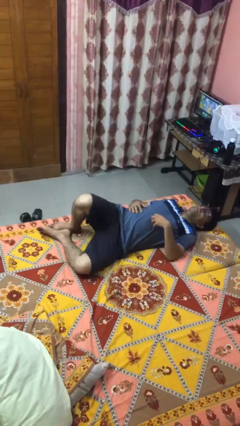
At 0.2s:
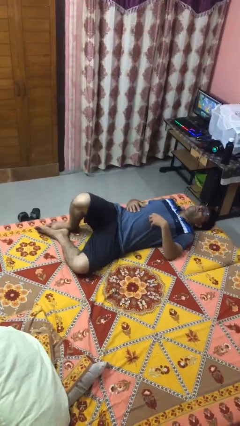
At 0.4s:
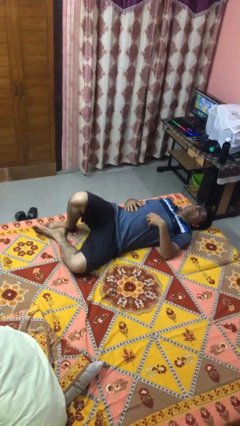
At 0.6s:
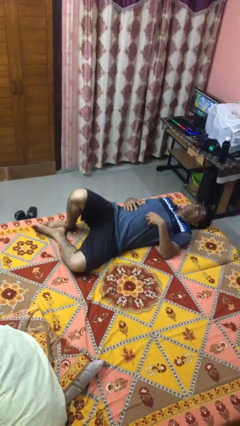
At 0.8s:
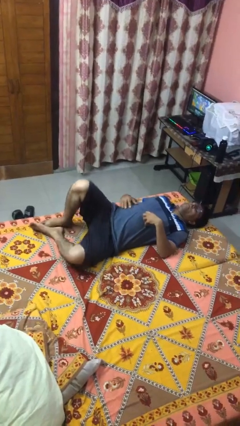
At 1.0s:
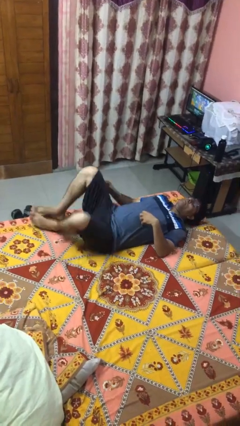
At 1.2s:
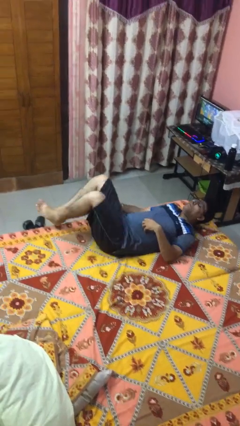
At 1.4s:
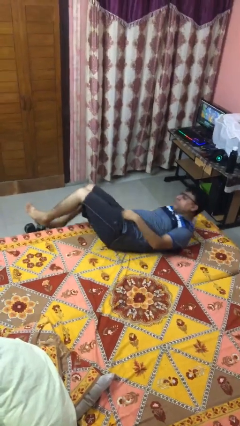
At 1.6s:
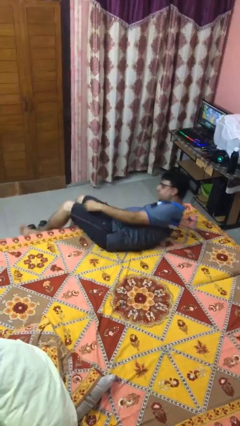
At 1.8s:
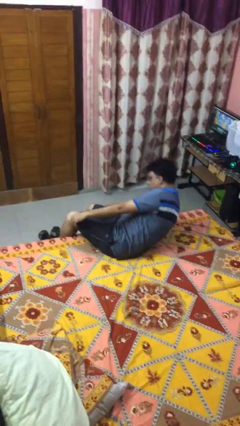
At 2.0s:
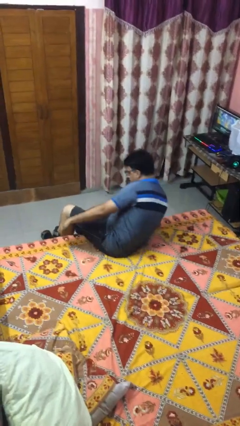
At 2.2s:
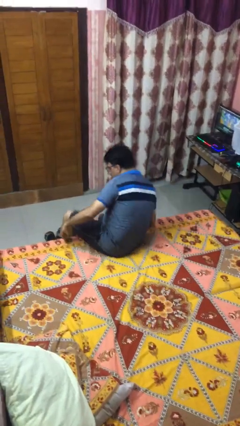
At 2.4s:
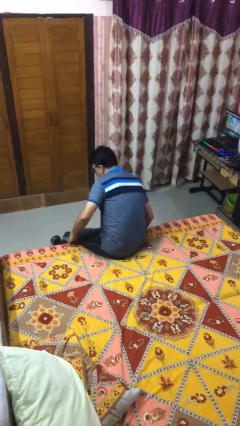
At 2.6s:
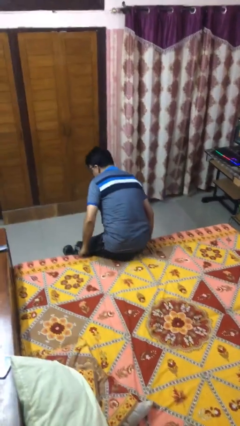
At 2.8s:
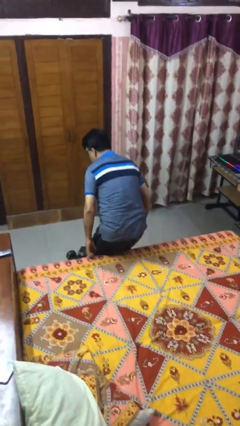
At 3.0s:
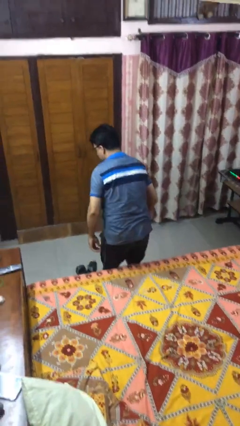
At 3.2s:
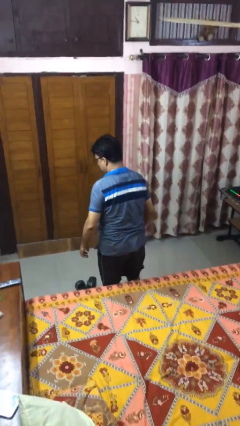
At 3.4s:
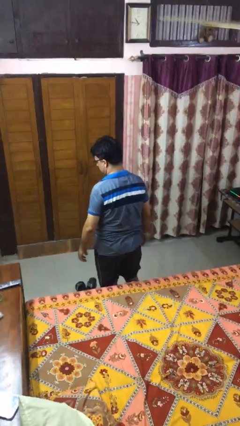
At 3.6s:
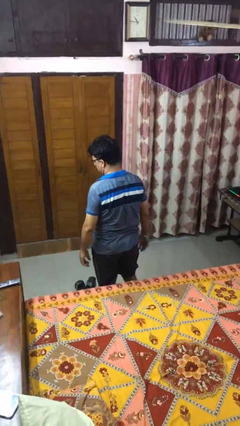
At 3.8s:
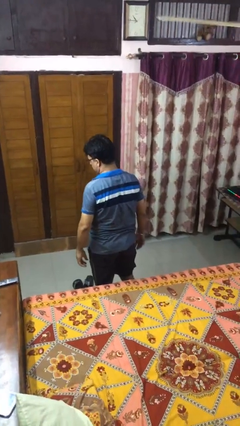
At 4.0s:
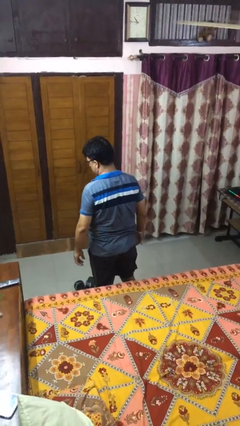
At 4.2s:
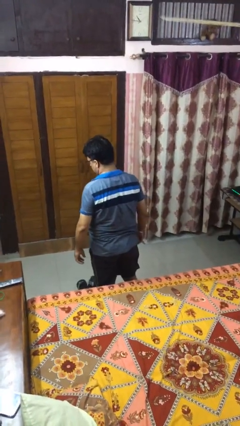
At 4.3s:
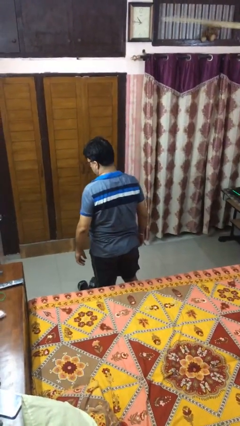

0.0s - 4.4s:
person stands up

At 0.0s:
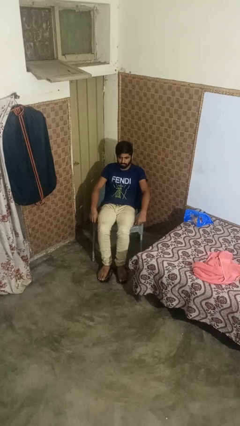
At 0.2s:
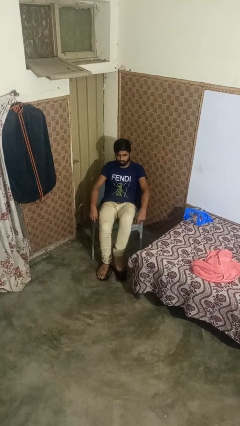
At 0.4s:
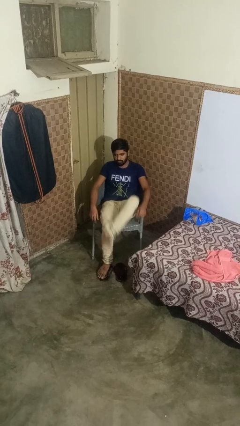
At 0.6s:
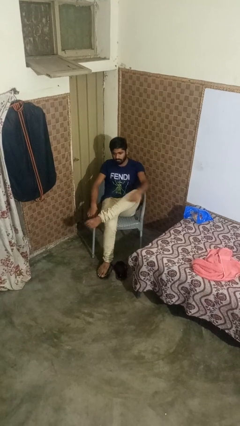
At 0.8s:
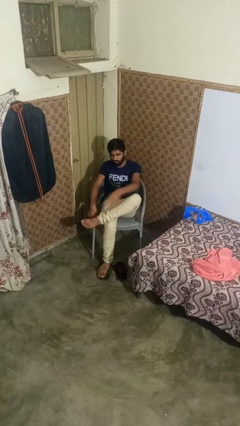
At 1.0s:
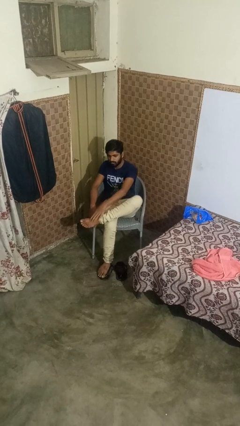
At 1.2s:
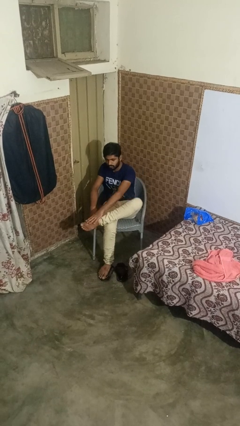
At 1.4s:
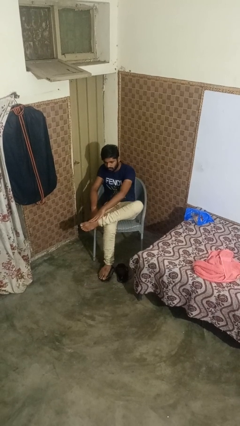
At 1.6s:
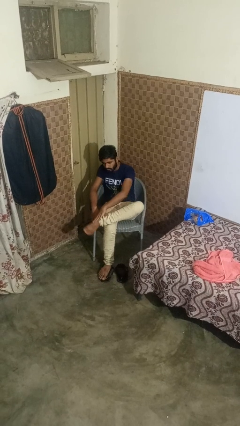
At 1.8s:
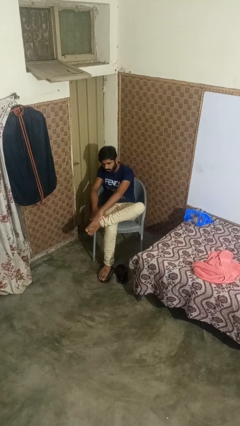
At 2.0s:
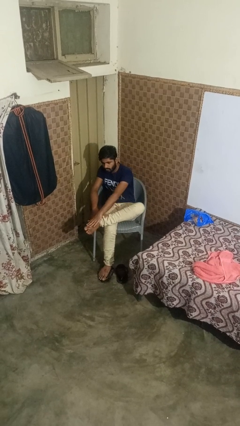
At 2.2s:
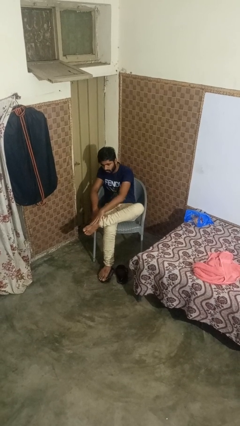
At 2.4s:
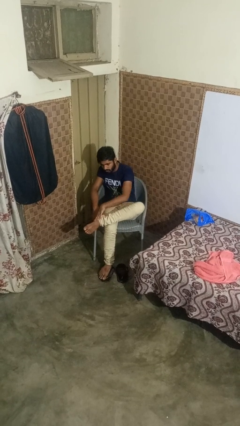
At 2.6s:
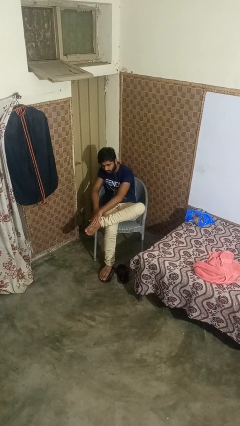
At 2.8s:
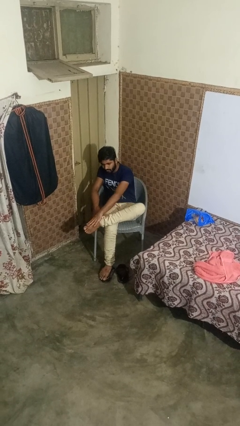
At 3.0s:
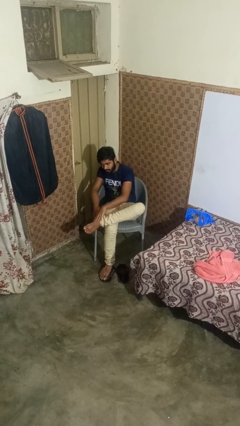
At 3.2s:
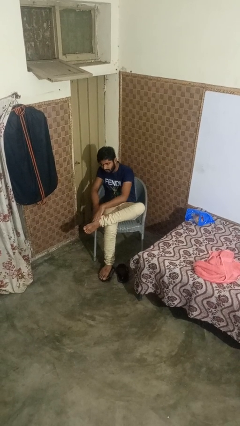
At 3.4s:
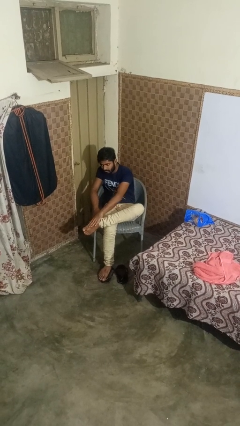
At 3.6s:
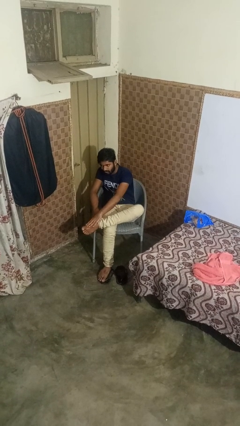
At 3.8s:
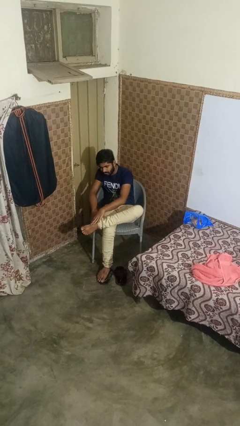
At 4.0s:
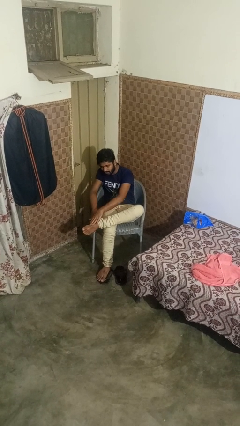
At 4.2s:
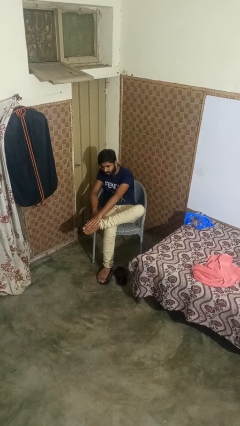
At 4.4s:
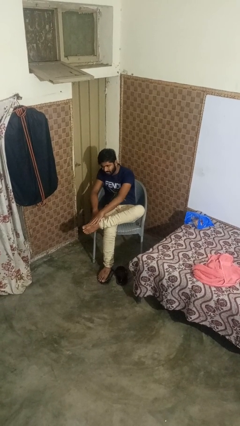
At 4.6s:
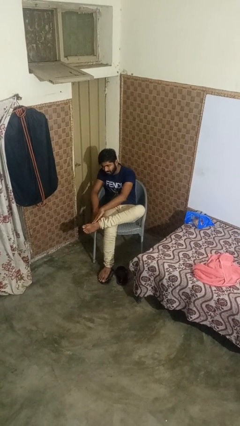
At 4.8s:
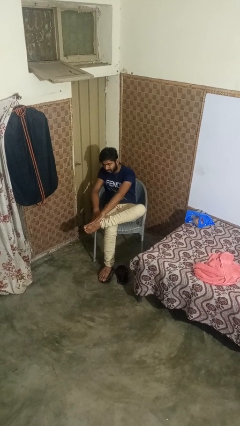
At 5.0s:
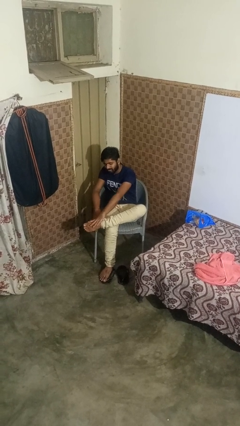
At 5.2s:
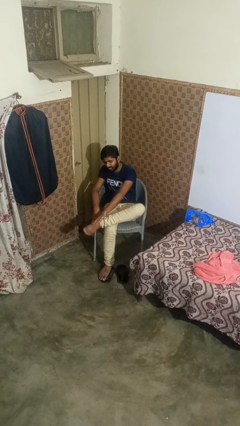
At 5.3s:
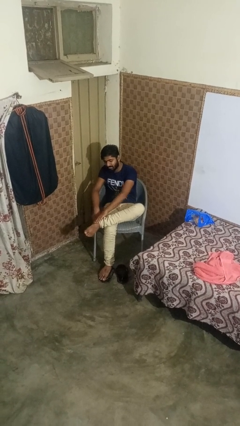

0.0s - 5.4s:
person rubs foot

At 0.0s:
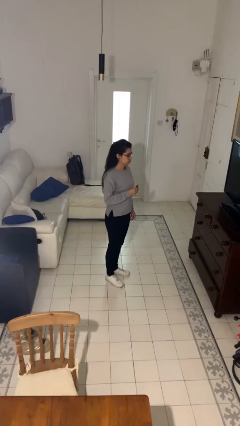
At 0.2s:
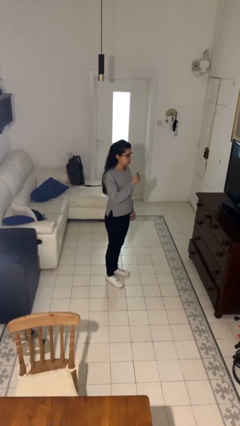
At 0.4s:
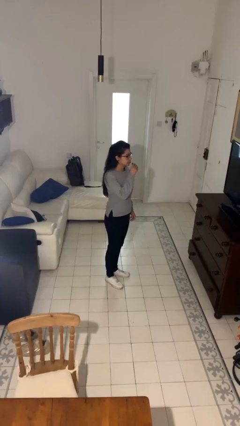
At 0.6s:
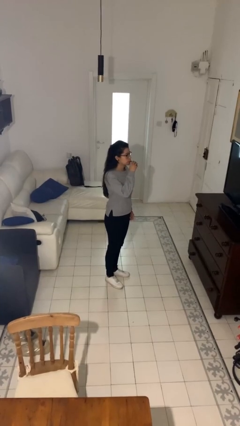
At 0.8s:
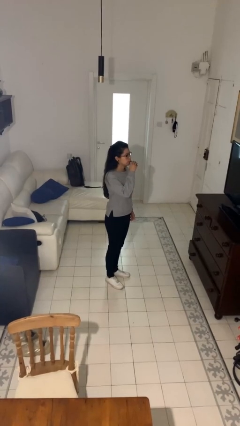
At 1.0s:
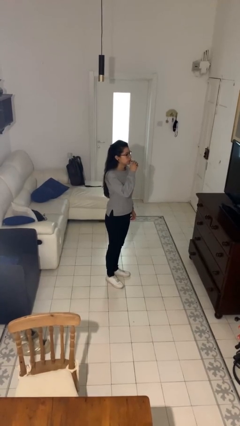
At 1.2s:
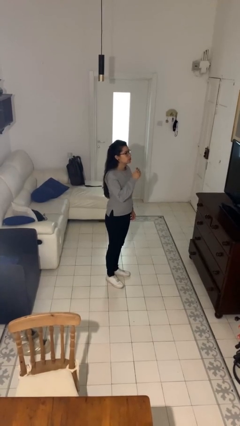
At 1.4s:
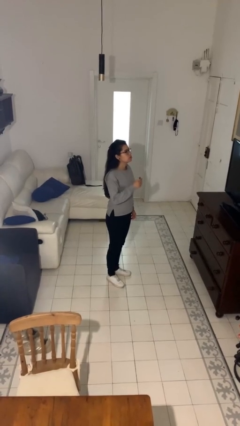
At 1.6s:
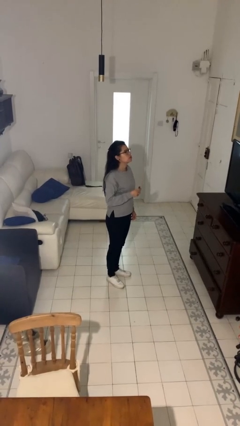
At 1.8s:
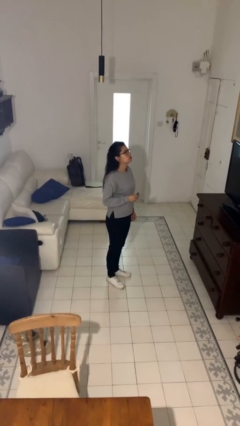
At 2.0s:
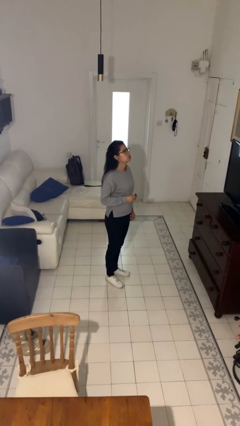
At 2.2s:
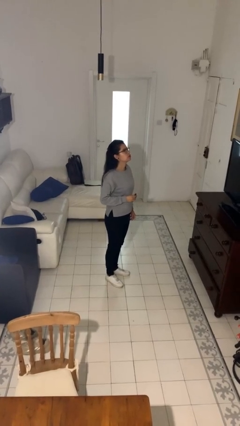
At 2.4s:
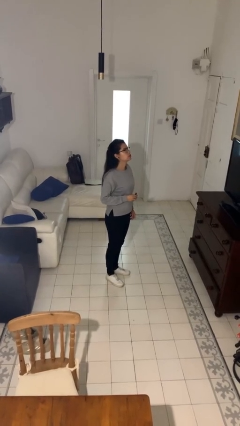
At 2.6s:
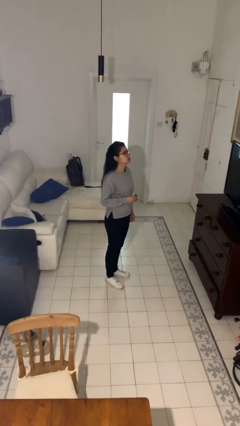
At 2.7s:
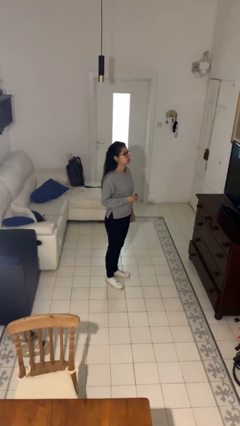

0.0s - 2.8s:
person vapes

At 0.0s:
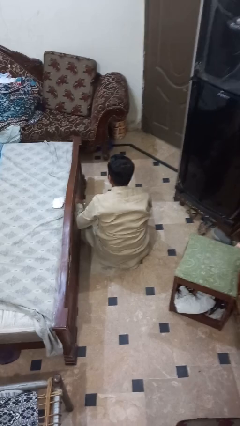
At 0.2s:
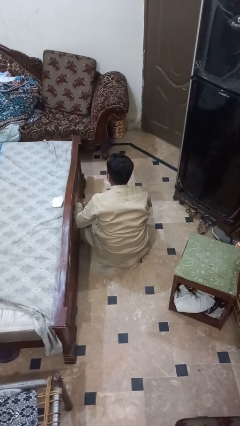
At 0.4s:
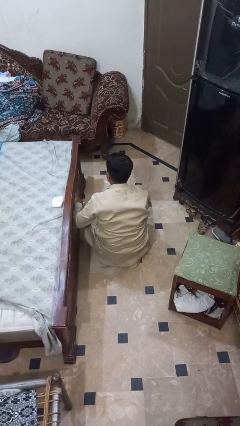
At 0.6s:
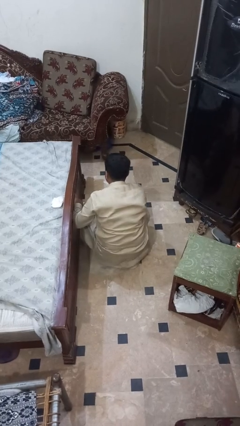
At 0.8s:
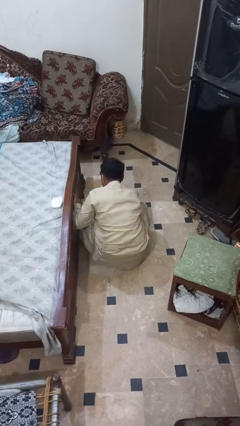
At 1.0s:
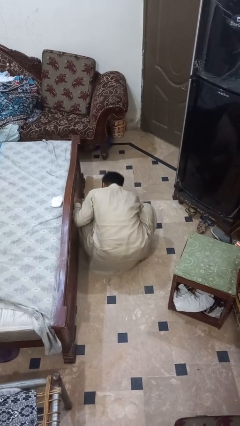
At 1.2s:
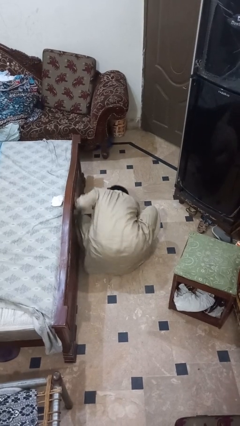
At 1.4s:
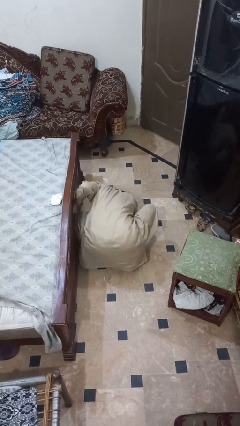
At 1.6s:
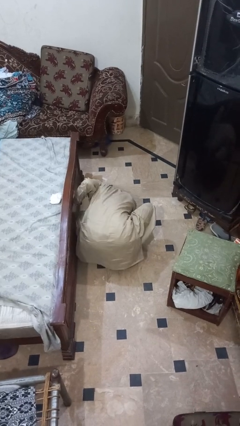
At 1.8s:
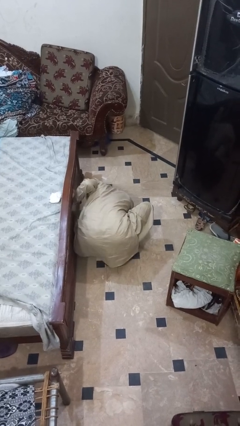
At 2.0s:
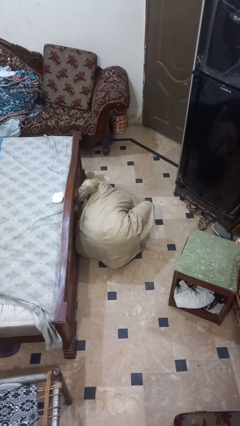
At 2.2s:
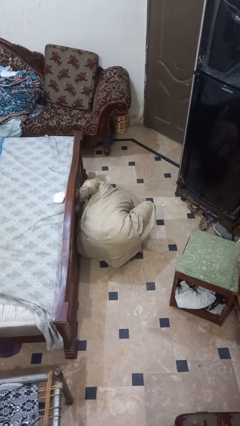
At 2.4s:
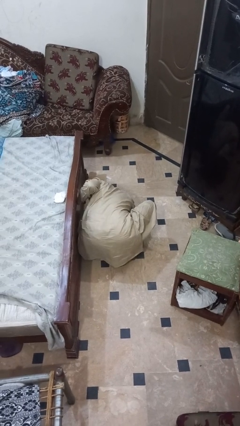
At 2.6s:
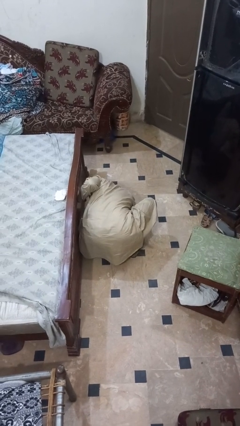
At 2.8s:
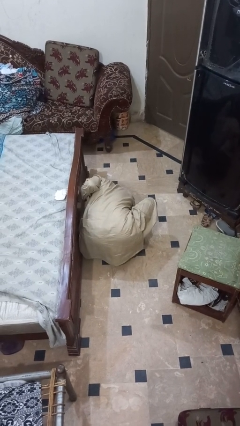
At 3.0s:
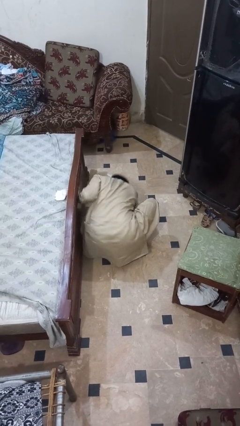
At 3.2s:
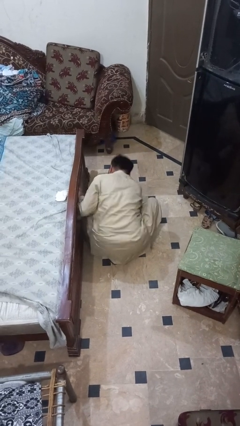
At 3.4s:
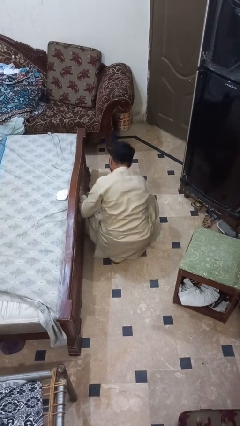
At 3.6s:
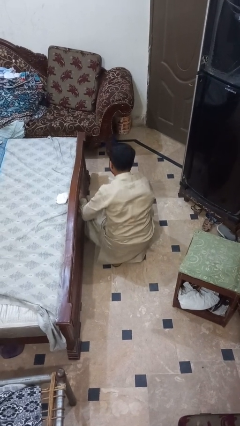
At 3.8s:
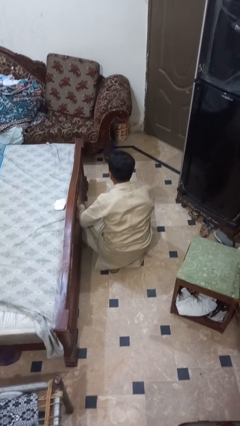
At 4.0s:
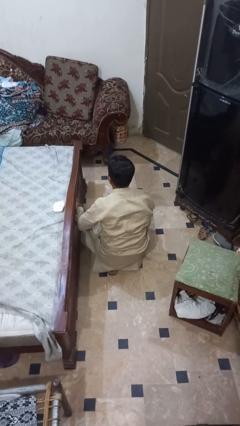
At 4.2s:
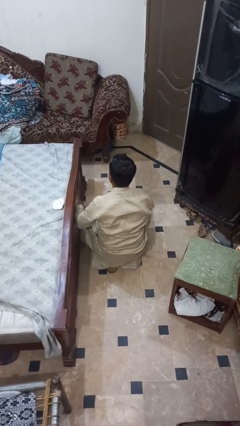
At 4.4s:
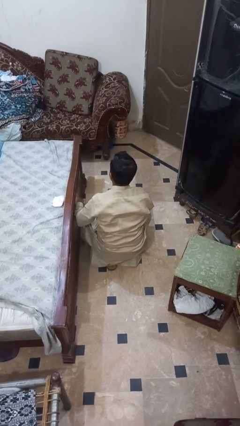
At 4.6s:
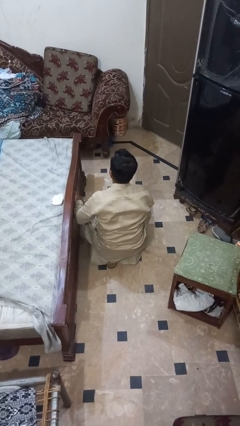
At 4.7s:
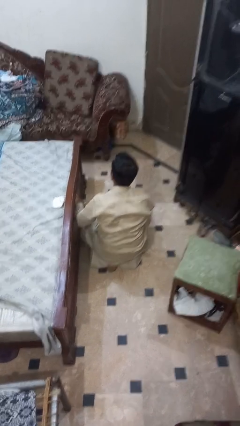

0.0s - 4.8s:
person searches under bed

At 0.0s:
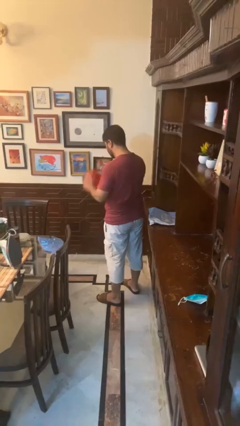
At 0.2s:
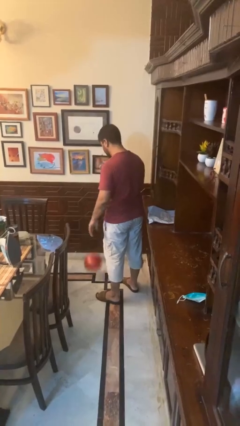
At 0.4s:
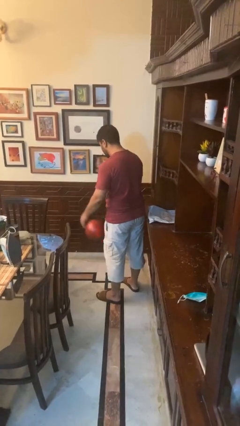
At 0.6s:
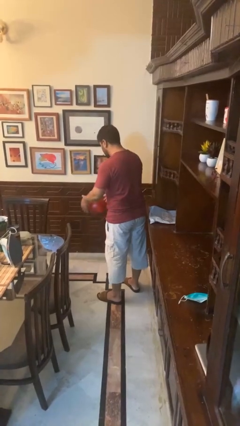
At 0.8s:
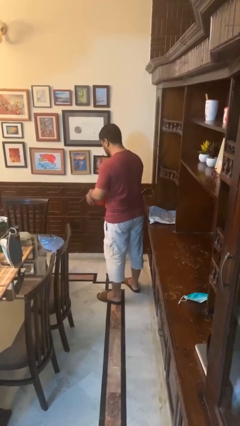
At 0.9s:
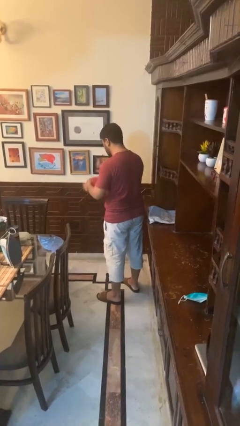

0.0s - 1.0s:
person bounces ball on floor
